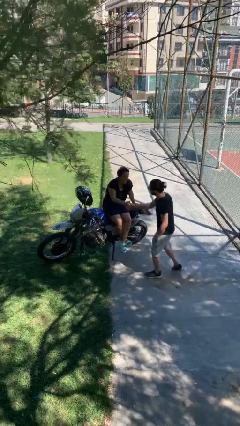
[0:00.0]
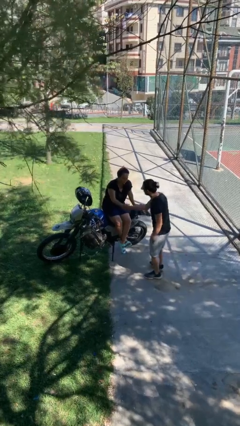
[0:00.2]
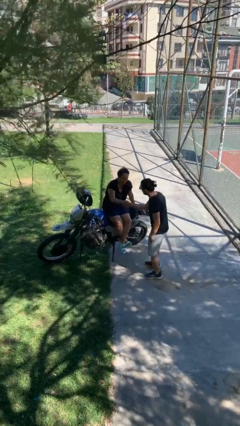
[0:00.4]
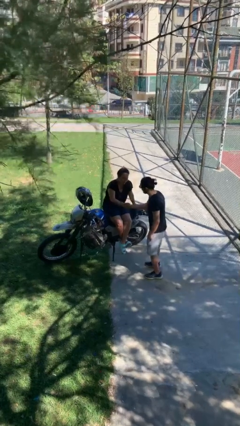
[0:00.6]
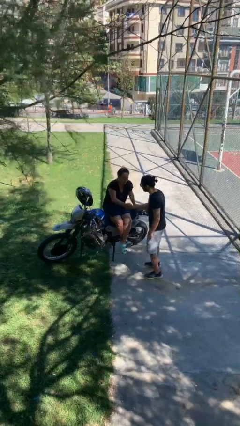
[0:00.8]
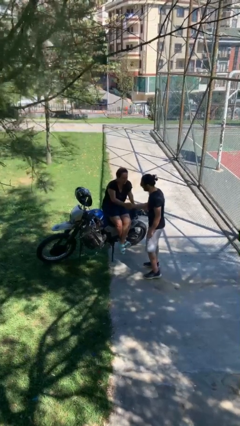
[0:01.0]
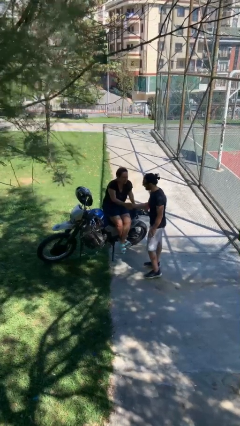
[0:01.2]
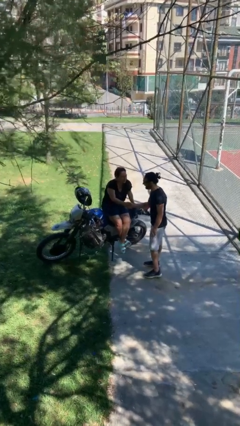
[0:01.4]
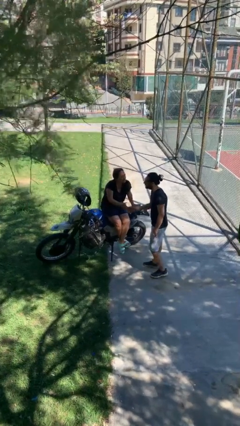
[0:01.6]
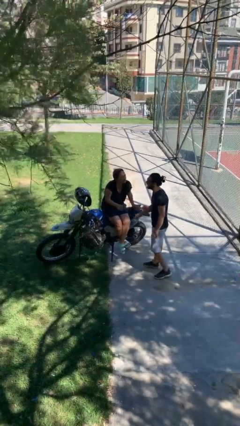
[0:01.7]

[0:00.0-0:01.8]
person shakes hand

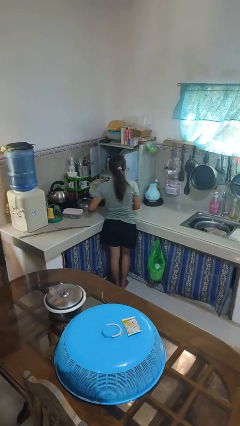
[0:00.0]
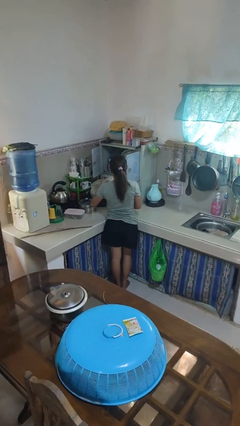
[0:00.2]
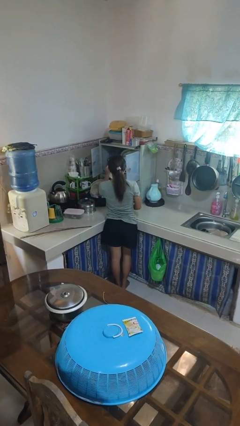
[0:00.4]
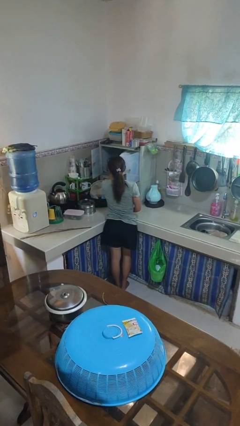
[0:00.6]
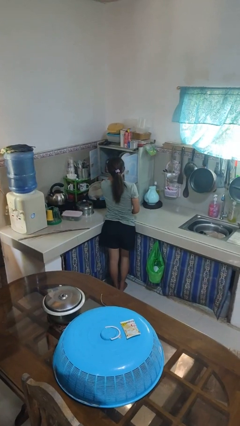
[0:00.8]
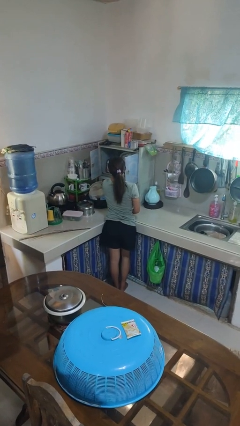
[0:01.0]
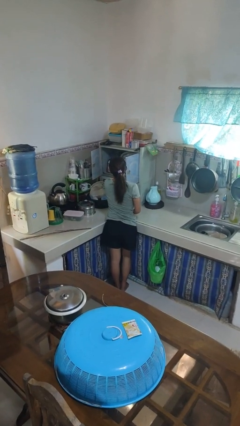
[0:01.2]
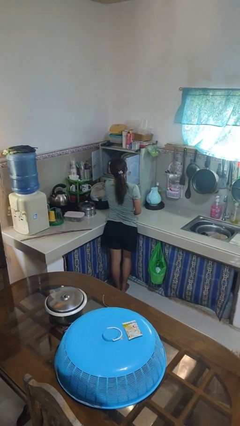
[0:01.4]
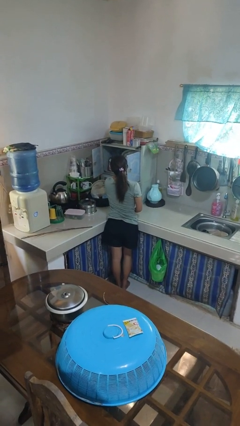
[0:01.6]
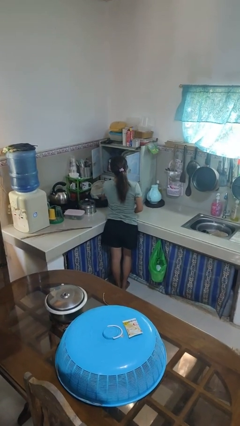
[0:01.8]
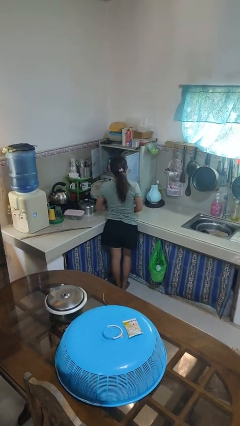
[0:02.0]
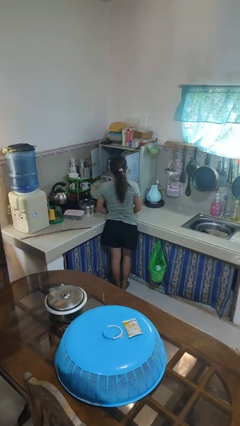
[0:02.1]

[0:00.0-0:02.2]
person puts object into kitchen drawer

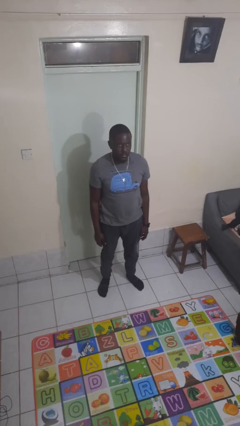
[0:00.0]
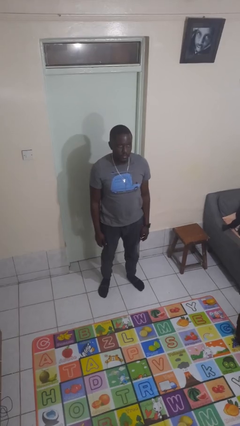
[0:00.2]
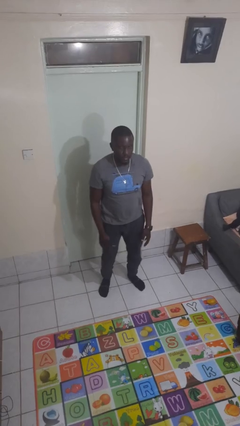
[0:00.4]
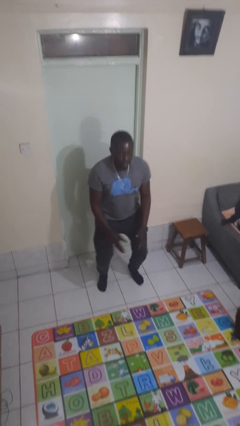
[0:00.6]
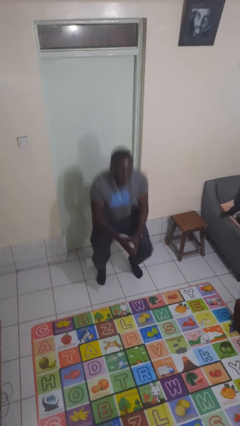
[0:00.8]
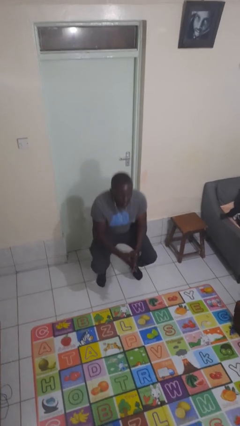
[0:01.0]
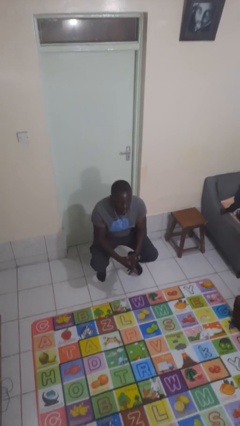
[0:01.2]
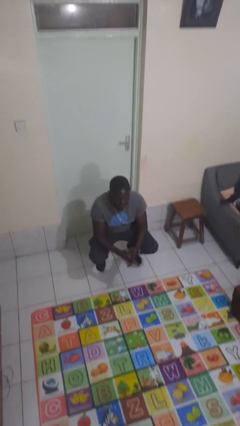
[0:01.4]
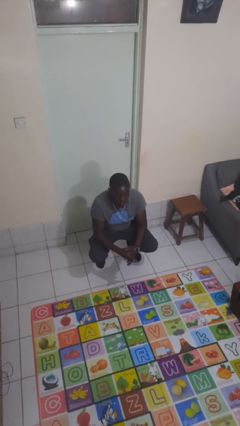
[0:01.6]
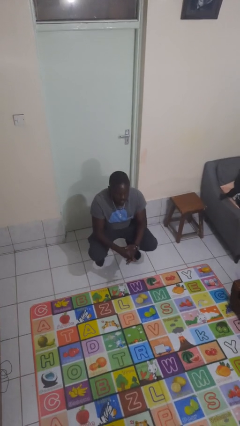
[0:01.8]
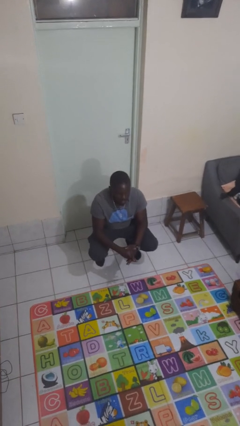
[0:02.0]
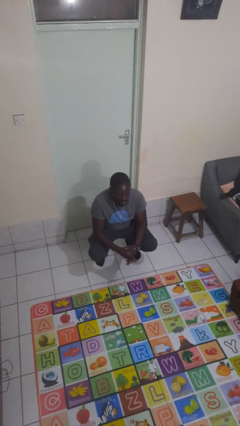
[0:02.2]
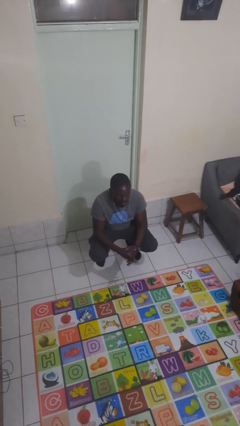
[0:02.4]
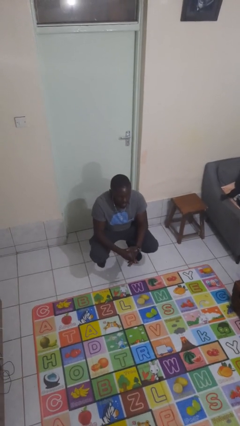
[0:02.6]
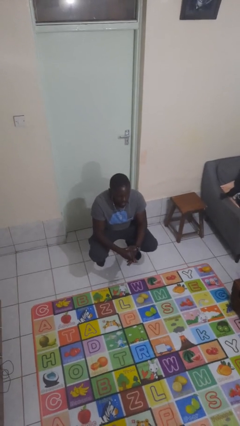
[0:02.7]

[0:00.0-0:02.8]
person squats

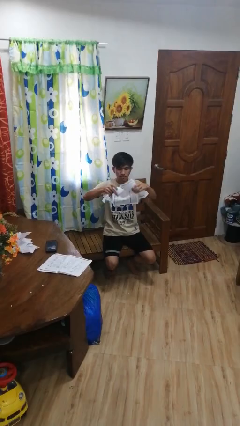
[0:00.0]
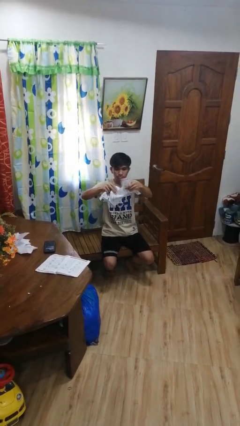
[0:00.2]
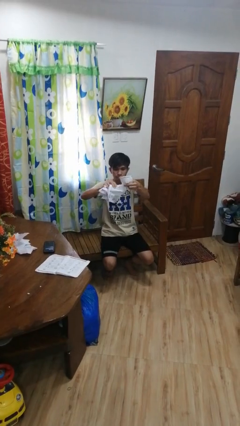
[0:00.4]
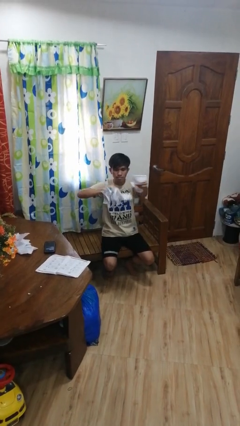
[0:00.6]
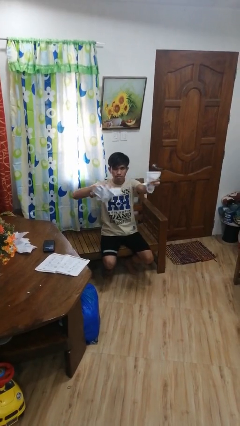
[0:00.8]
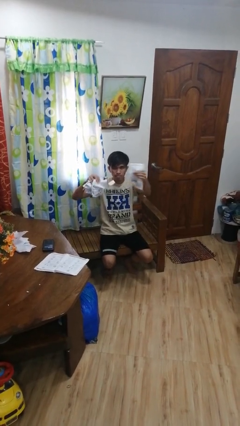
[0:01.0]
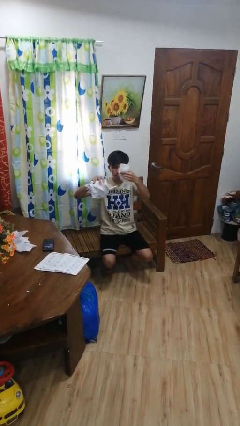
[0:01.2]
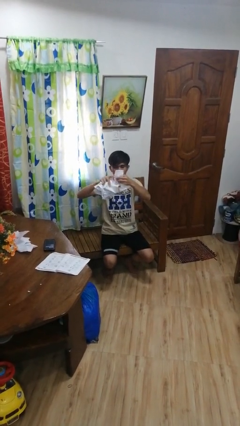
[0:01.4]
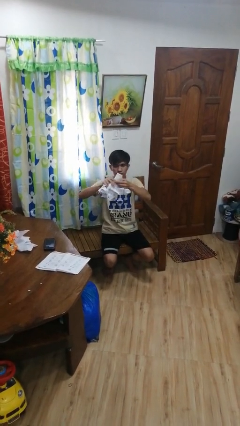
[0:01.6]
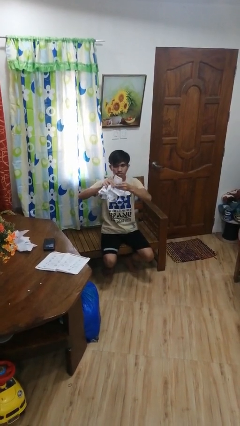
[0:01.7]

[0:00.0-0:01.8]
person tears paper

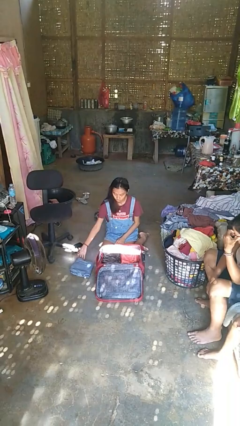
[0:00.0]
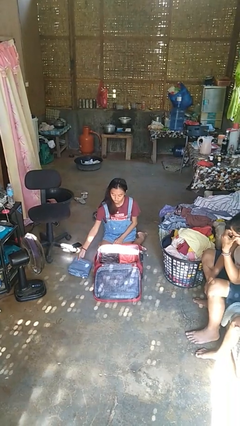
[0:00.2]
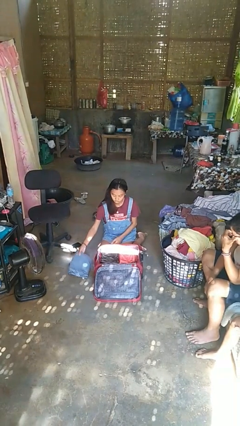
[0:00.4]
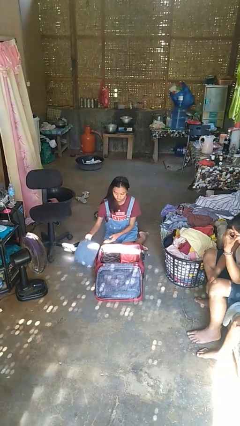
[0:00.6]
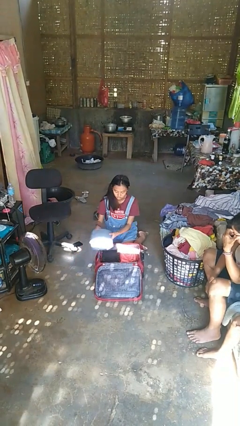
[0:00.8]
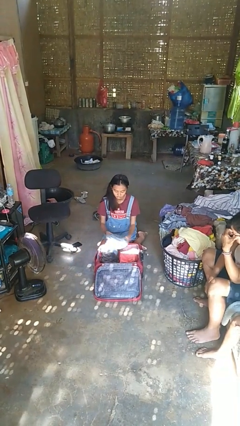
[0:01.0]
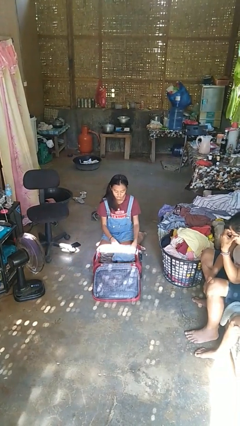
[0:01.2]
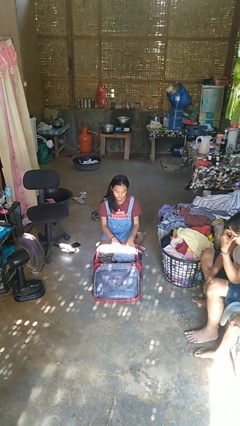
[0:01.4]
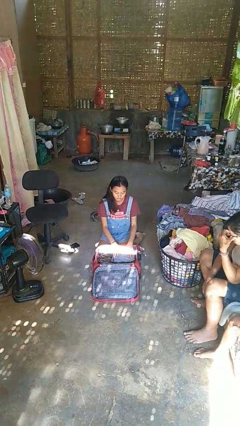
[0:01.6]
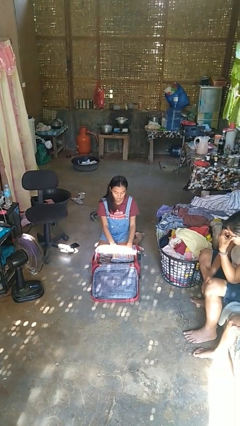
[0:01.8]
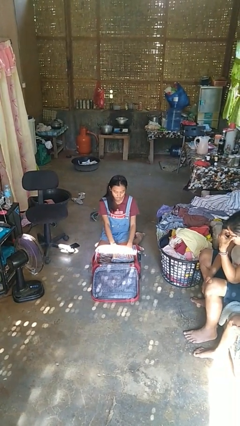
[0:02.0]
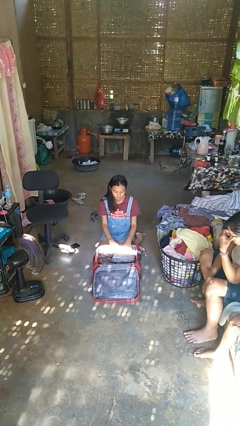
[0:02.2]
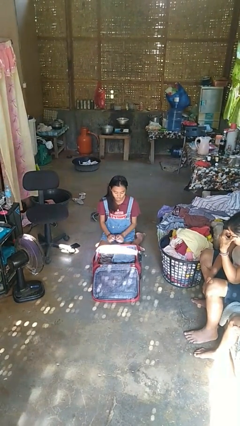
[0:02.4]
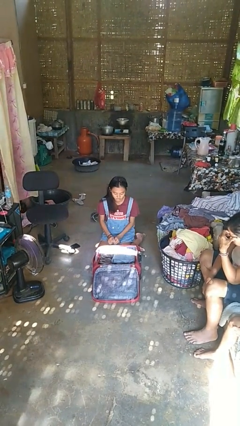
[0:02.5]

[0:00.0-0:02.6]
person loads clothes into suitcase

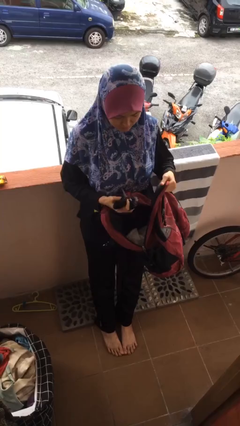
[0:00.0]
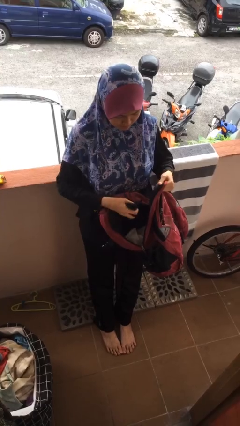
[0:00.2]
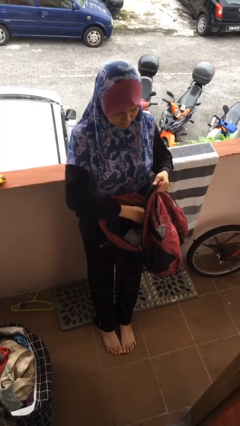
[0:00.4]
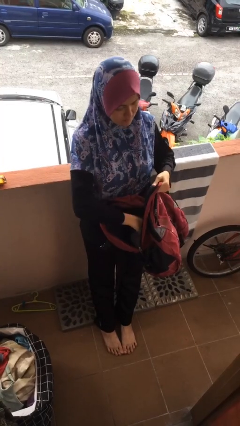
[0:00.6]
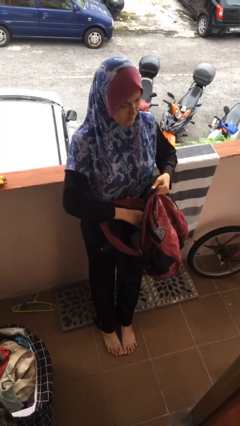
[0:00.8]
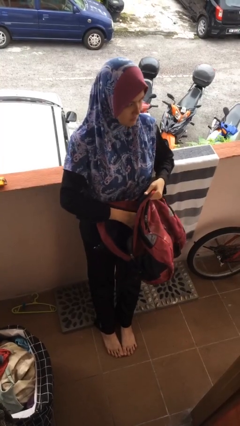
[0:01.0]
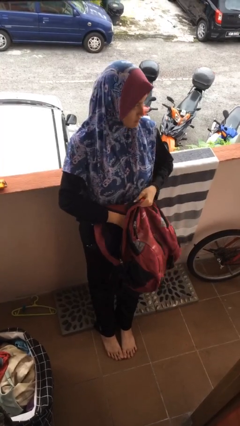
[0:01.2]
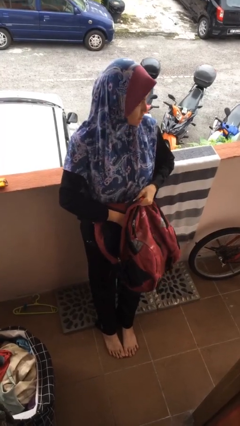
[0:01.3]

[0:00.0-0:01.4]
person puts object into backpack

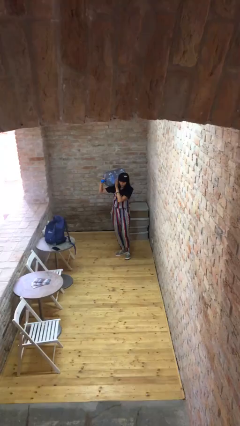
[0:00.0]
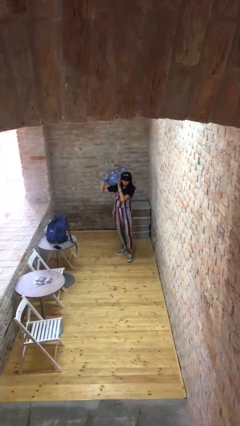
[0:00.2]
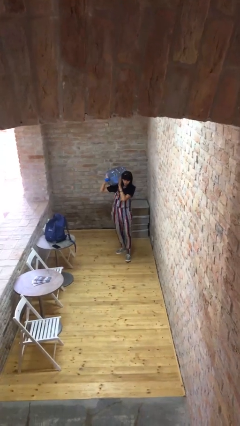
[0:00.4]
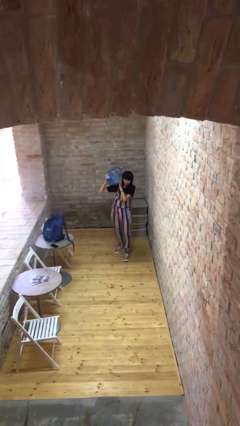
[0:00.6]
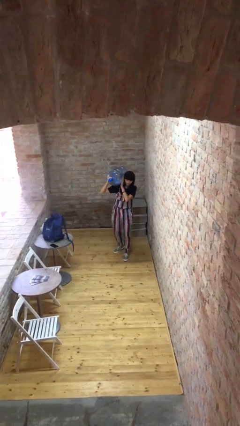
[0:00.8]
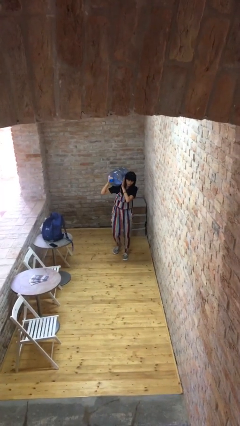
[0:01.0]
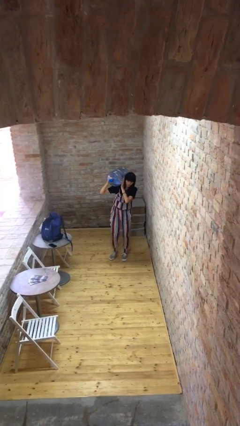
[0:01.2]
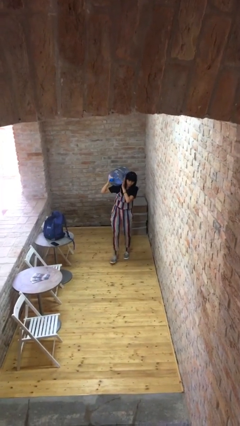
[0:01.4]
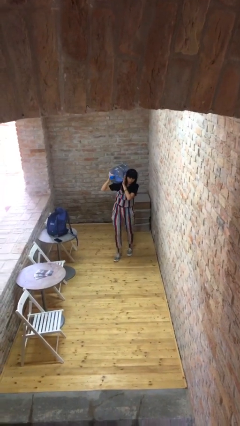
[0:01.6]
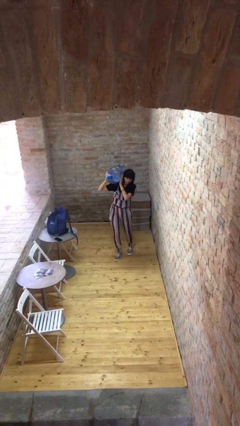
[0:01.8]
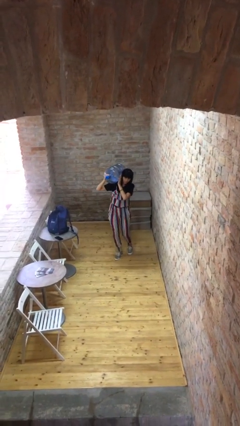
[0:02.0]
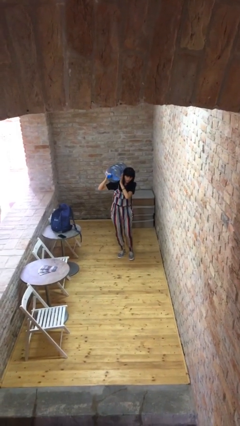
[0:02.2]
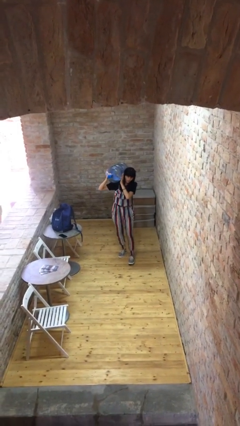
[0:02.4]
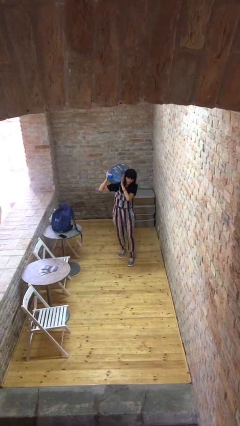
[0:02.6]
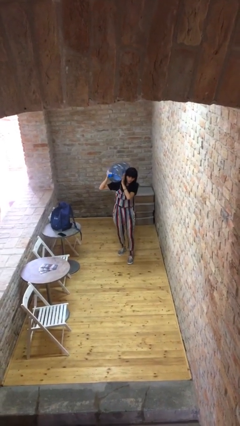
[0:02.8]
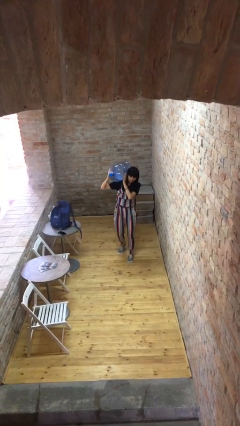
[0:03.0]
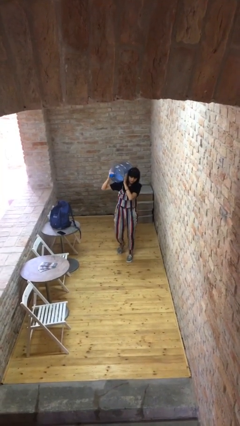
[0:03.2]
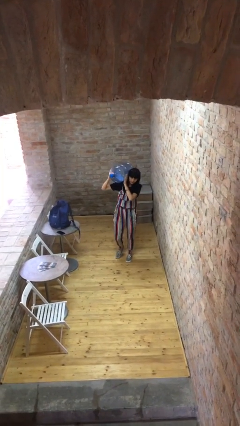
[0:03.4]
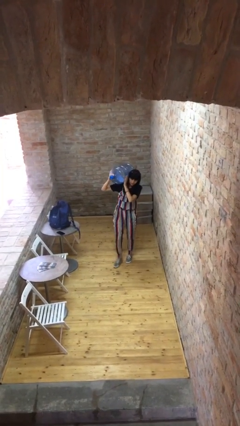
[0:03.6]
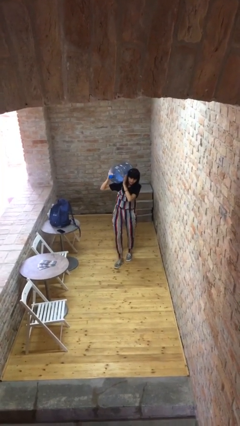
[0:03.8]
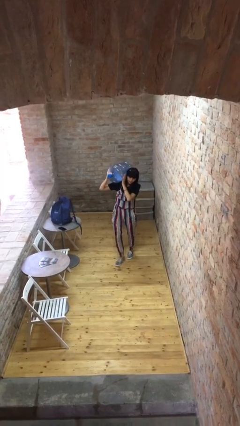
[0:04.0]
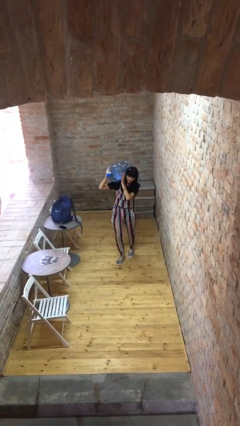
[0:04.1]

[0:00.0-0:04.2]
person carries heavy object
